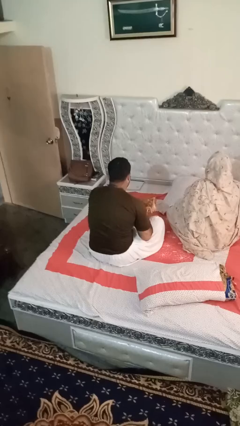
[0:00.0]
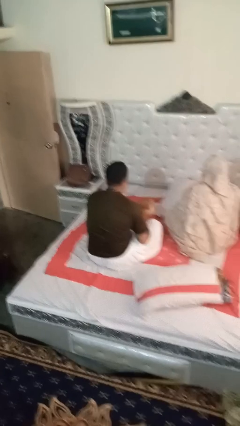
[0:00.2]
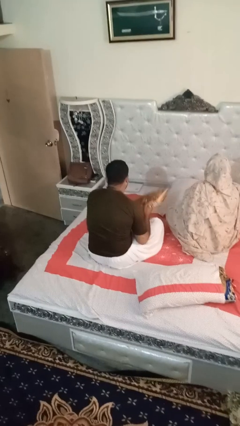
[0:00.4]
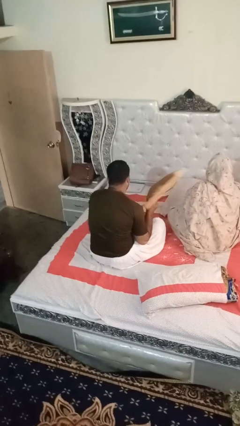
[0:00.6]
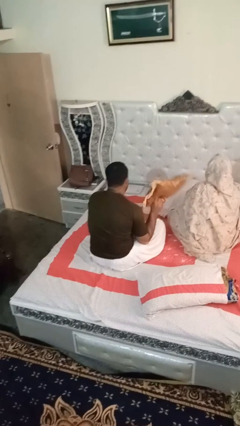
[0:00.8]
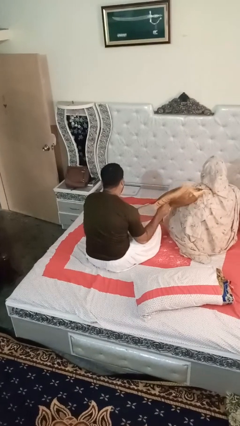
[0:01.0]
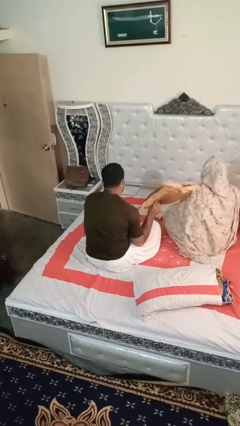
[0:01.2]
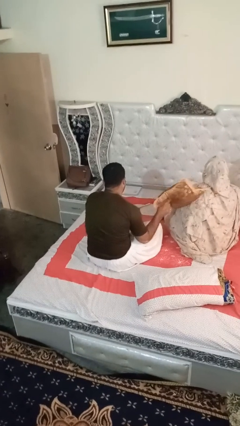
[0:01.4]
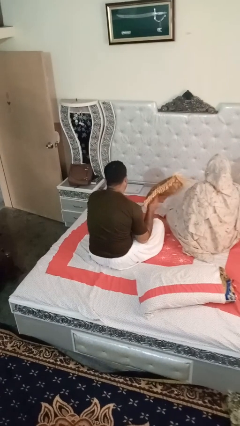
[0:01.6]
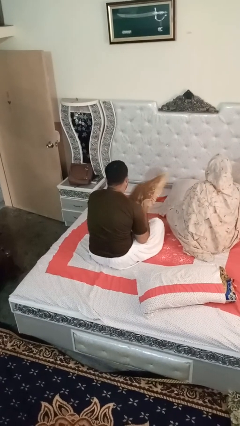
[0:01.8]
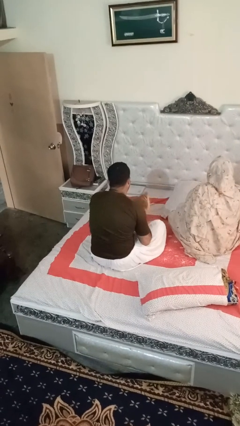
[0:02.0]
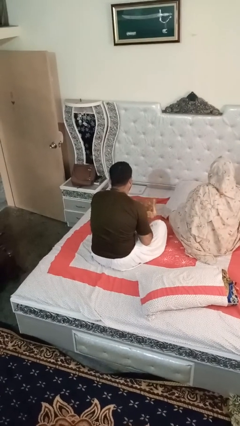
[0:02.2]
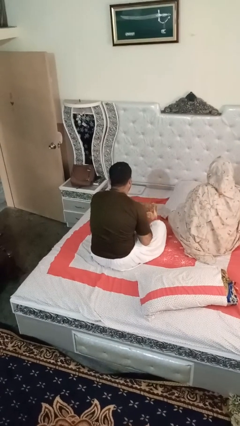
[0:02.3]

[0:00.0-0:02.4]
person hits person with pillow

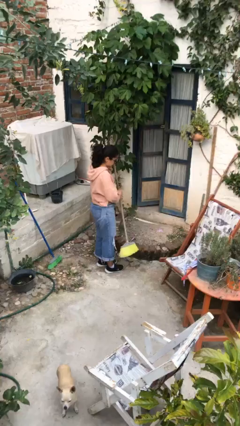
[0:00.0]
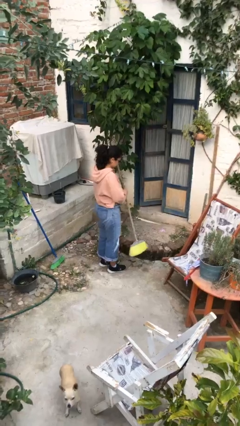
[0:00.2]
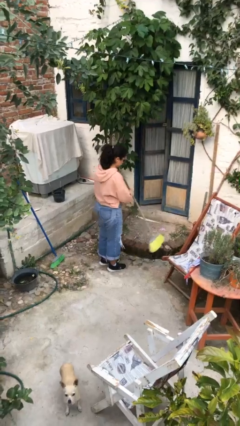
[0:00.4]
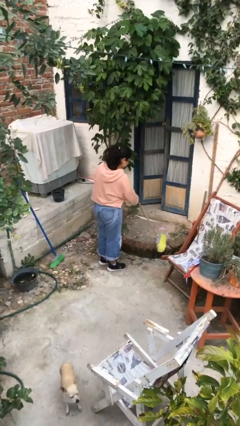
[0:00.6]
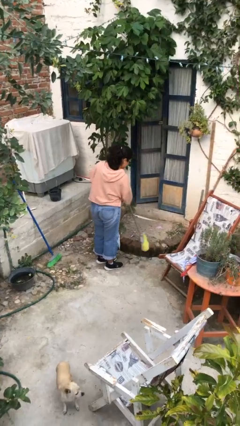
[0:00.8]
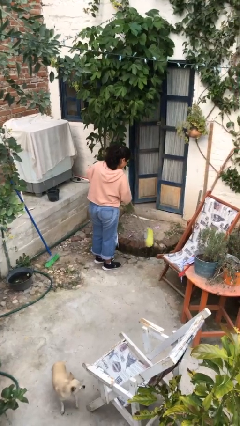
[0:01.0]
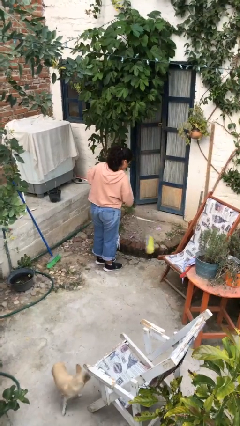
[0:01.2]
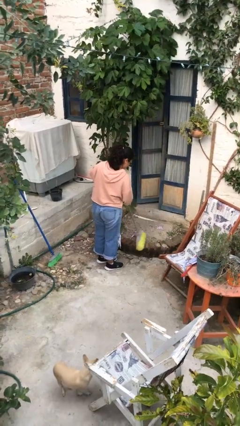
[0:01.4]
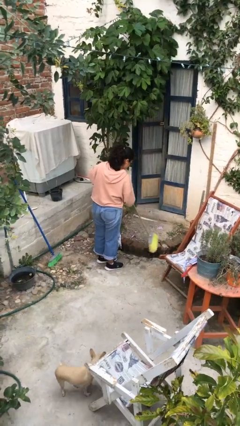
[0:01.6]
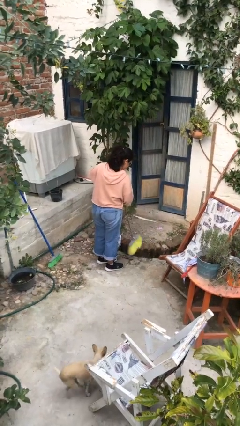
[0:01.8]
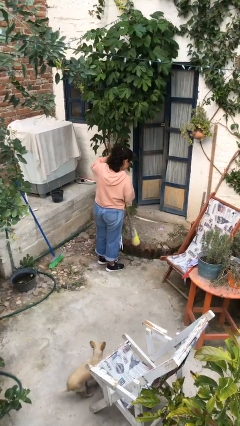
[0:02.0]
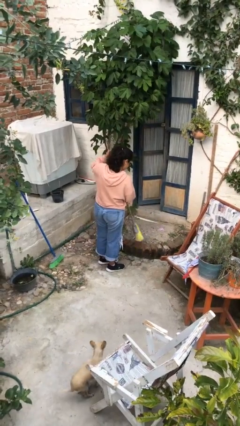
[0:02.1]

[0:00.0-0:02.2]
person sweeps floor

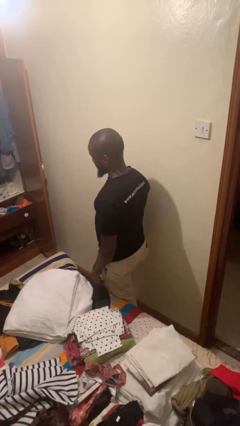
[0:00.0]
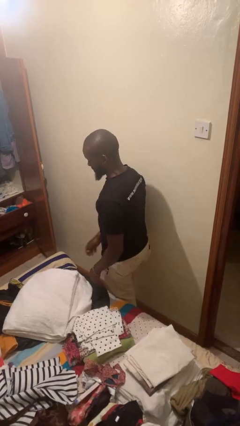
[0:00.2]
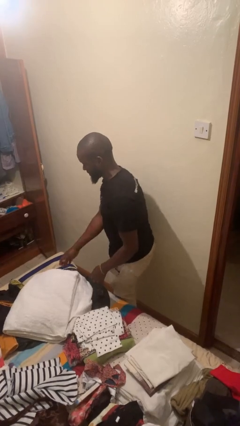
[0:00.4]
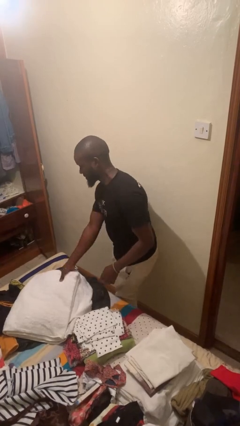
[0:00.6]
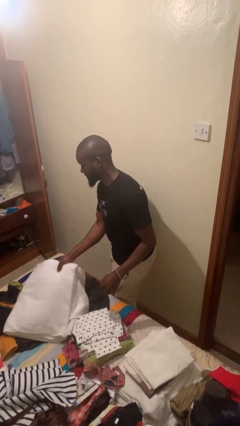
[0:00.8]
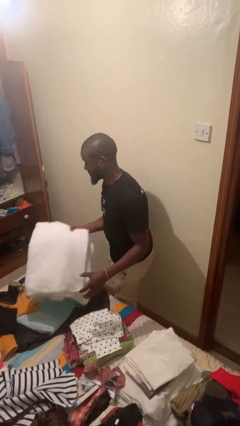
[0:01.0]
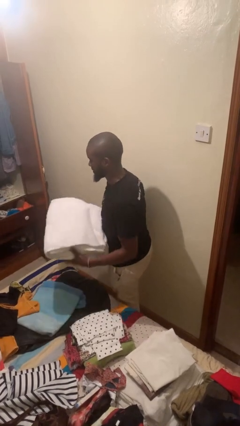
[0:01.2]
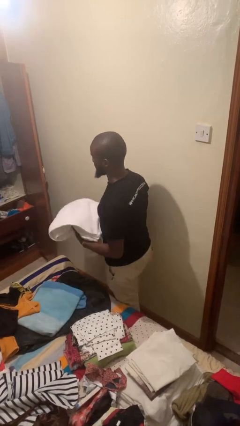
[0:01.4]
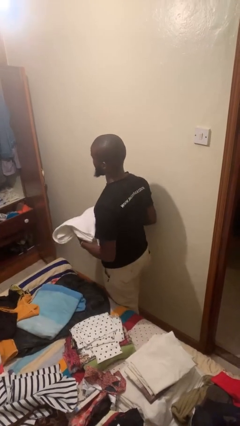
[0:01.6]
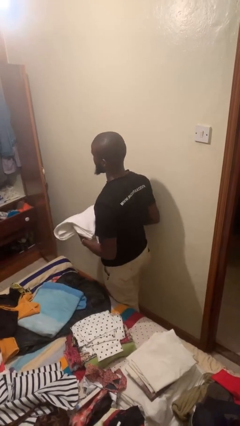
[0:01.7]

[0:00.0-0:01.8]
person picks up object from bed

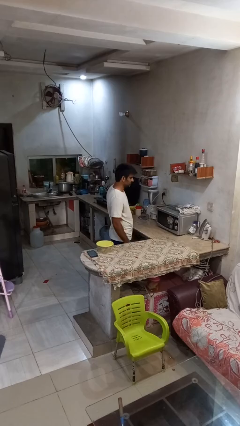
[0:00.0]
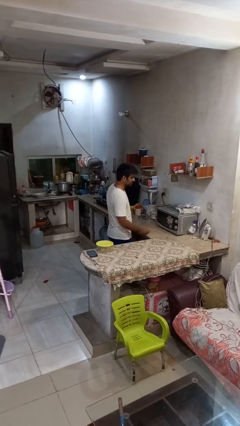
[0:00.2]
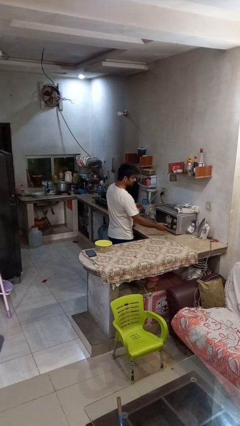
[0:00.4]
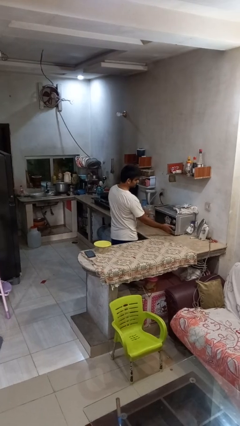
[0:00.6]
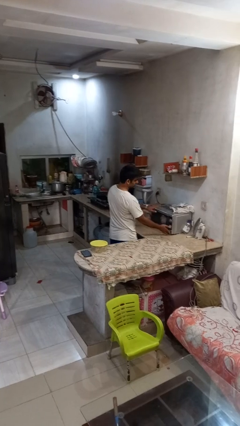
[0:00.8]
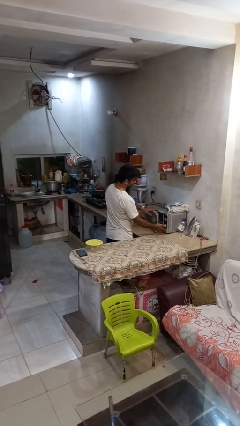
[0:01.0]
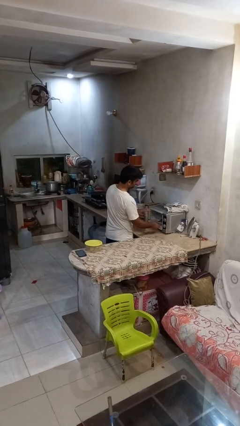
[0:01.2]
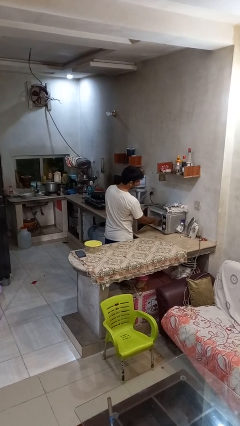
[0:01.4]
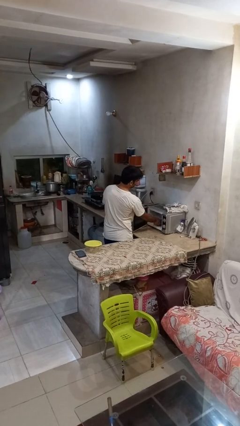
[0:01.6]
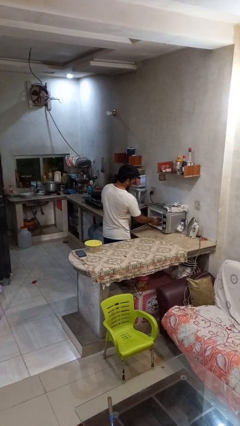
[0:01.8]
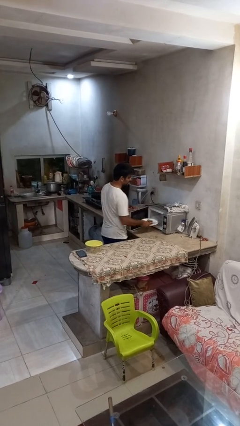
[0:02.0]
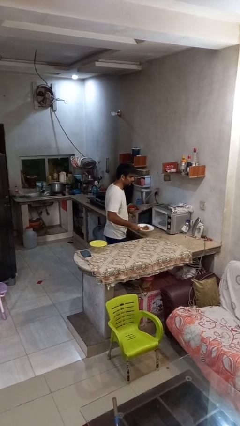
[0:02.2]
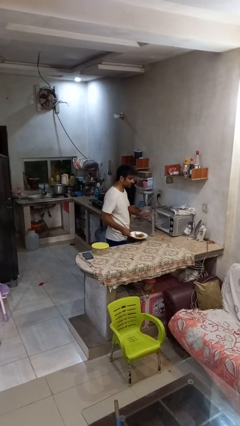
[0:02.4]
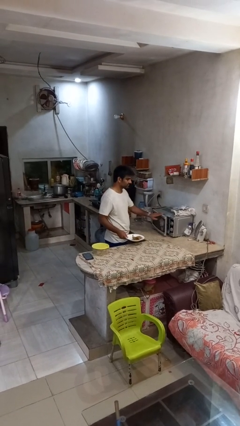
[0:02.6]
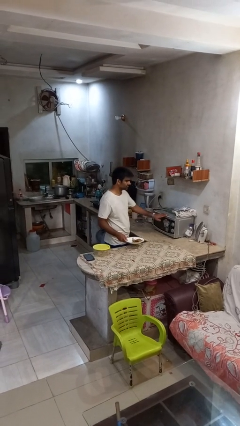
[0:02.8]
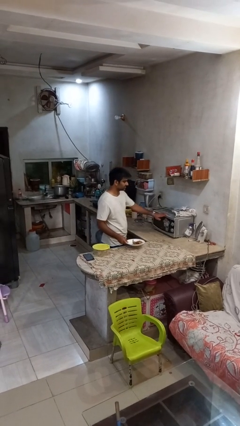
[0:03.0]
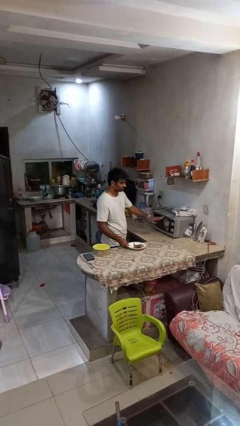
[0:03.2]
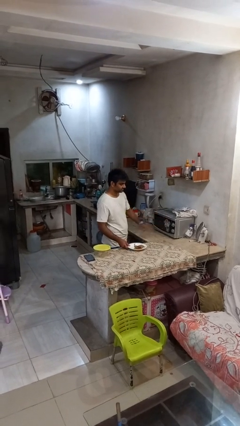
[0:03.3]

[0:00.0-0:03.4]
person takes object from microwave

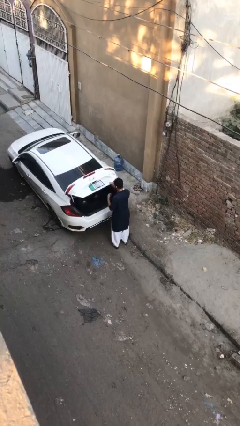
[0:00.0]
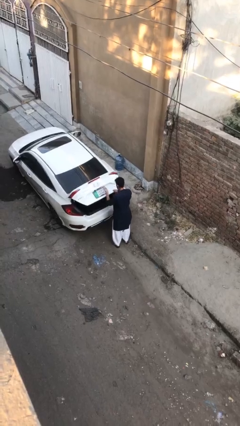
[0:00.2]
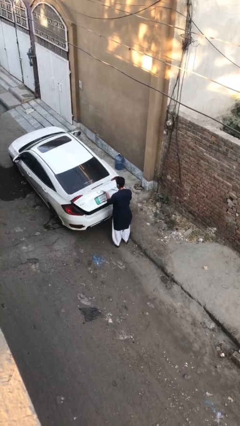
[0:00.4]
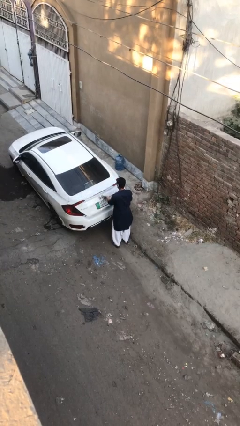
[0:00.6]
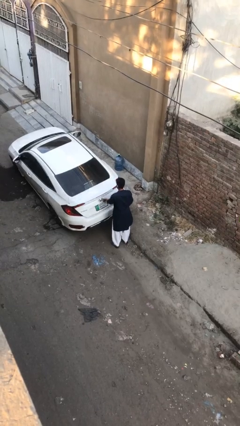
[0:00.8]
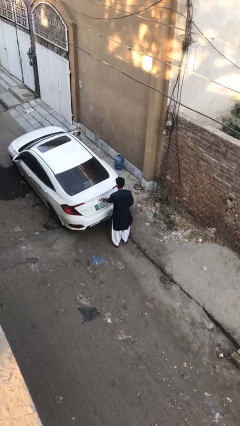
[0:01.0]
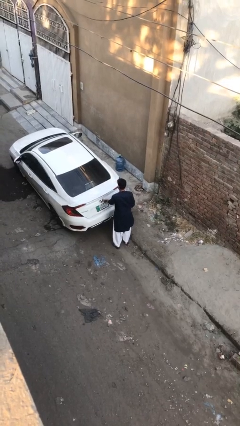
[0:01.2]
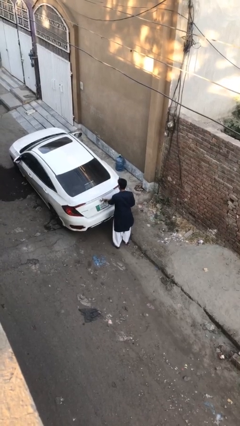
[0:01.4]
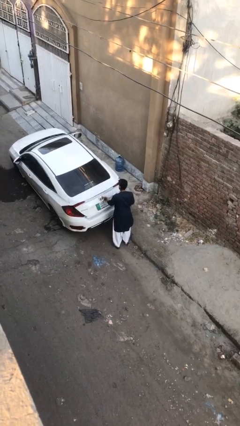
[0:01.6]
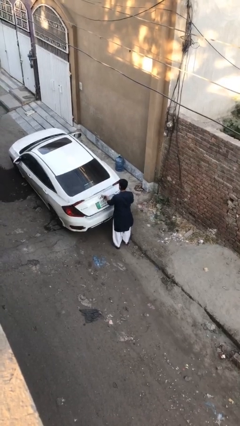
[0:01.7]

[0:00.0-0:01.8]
person closes car trunk

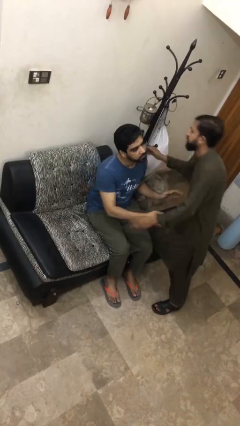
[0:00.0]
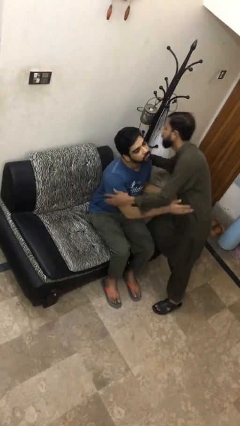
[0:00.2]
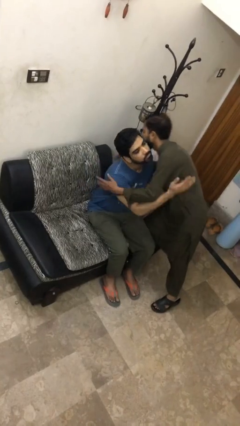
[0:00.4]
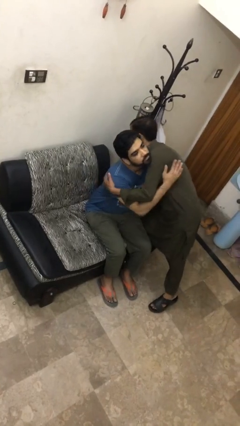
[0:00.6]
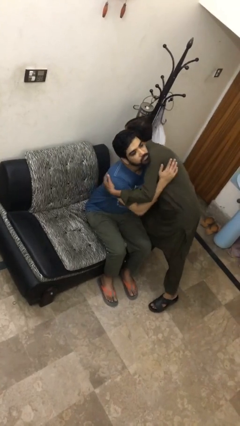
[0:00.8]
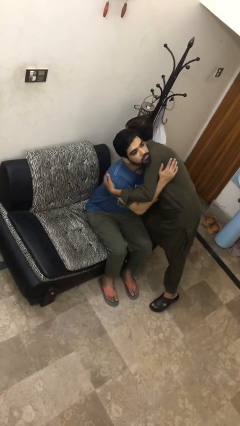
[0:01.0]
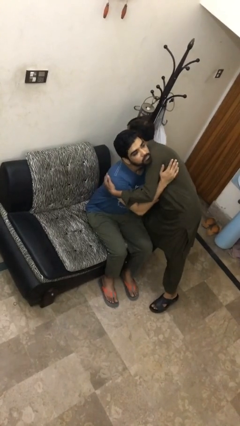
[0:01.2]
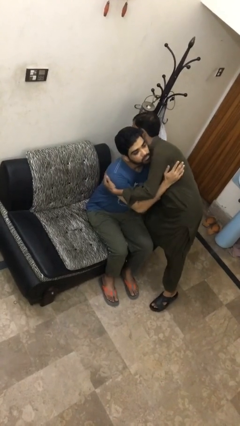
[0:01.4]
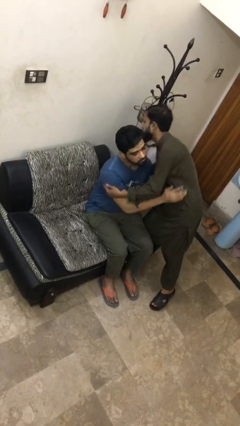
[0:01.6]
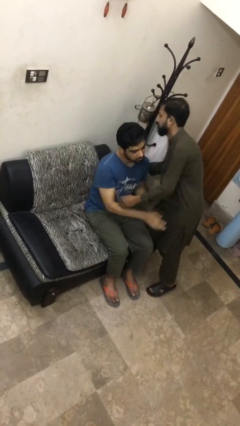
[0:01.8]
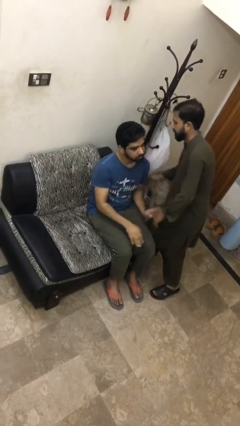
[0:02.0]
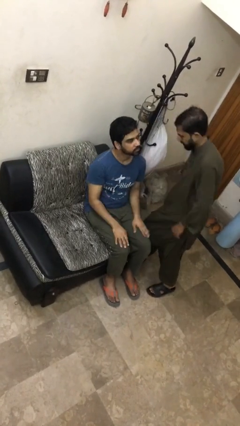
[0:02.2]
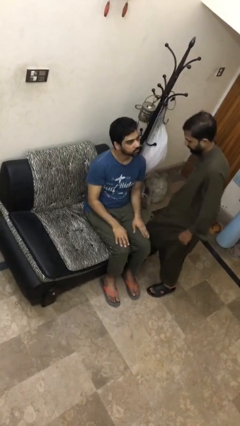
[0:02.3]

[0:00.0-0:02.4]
person embraces person

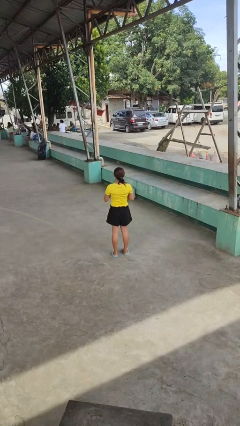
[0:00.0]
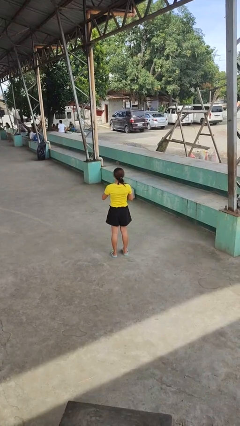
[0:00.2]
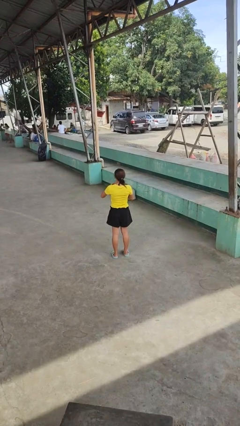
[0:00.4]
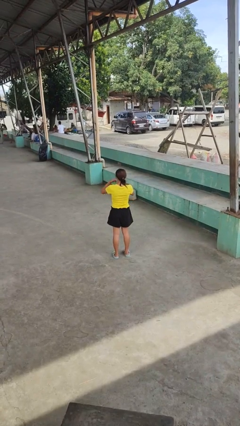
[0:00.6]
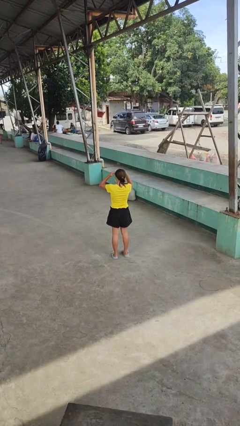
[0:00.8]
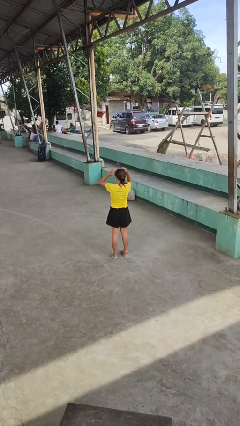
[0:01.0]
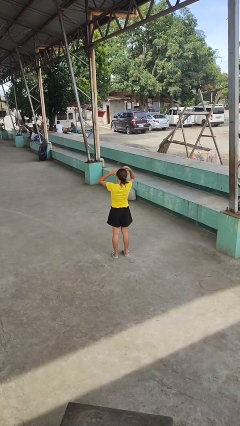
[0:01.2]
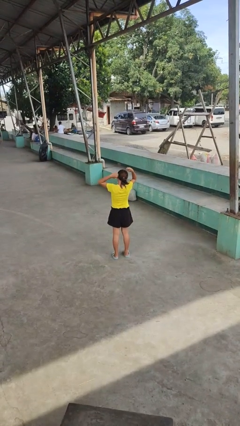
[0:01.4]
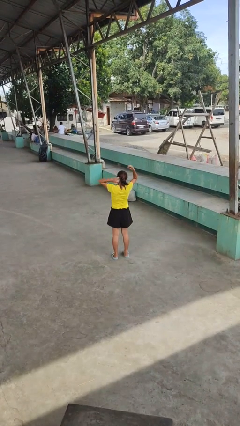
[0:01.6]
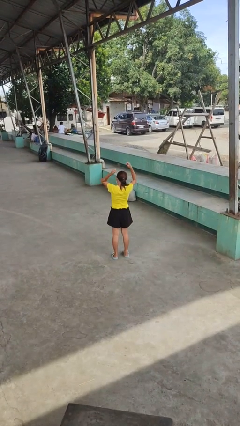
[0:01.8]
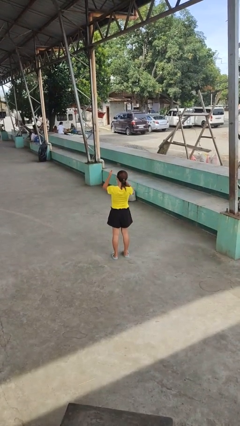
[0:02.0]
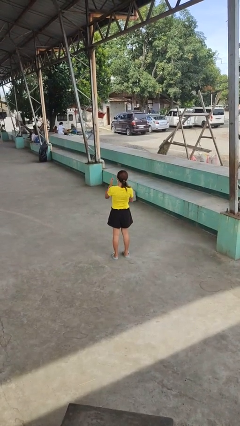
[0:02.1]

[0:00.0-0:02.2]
person takes off necklace

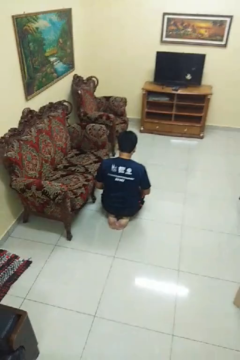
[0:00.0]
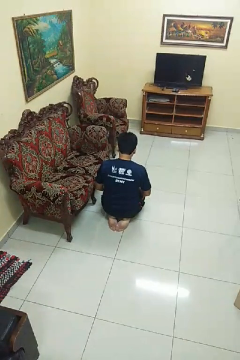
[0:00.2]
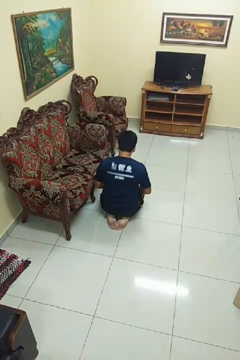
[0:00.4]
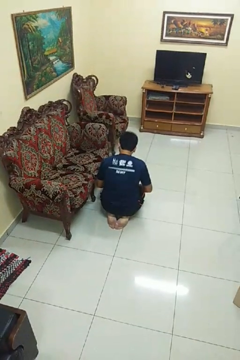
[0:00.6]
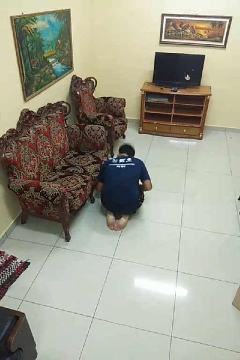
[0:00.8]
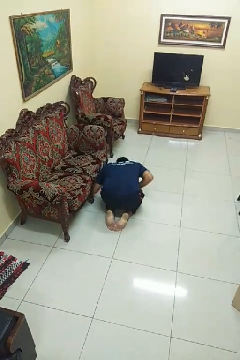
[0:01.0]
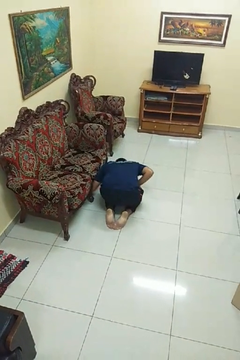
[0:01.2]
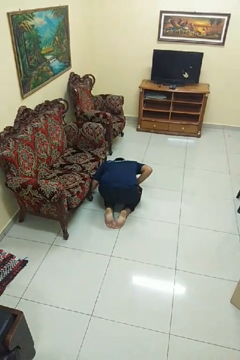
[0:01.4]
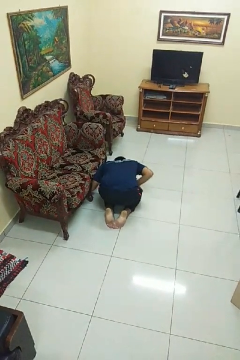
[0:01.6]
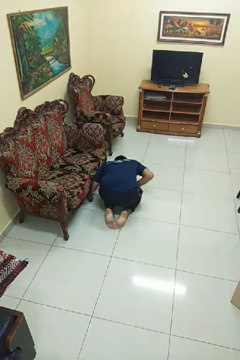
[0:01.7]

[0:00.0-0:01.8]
person searches under couch
